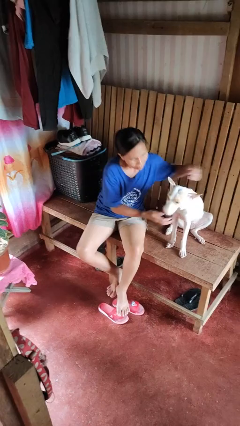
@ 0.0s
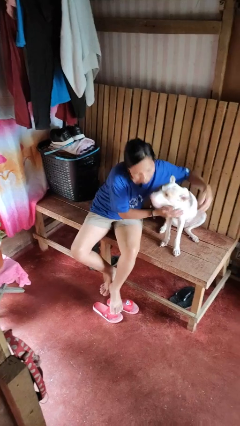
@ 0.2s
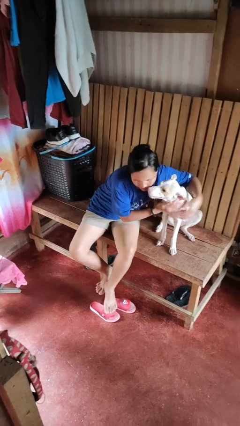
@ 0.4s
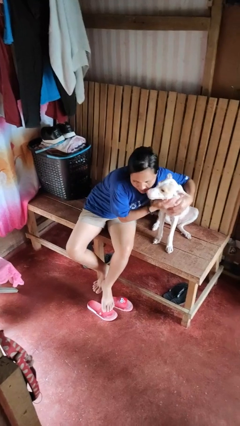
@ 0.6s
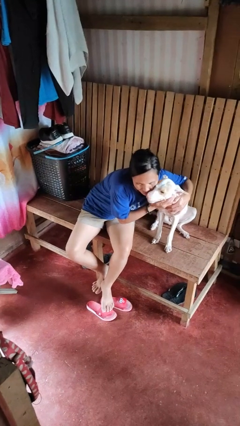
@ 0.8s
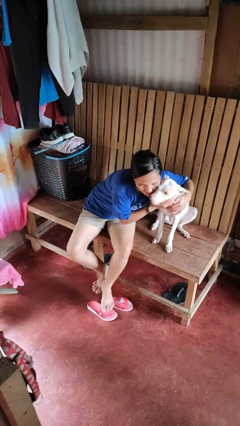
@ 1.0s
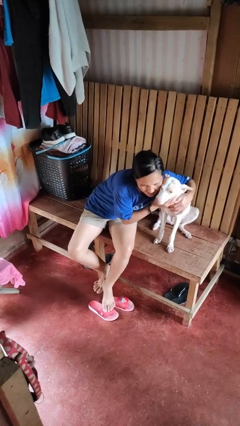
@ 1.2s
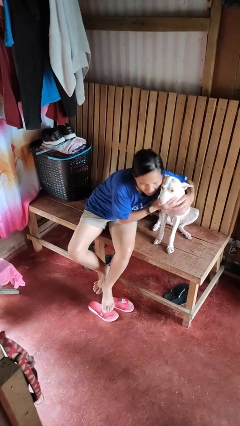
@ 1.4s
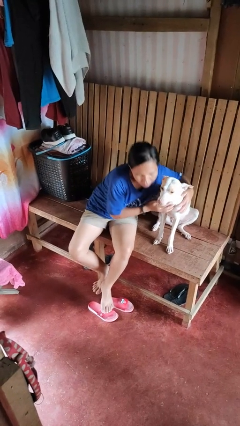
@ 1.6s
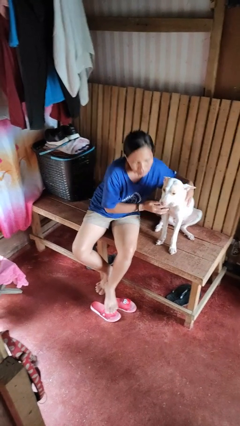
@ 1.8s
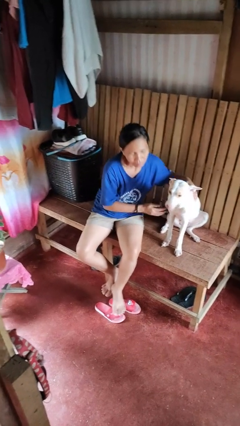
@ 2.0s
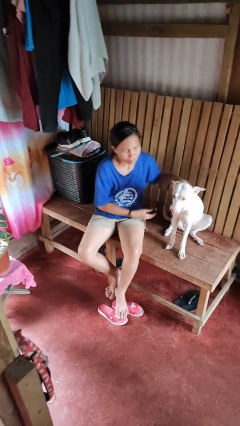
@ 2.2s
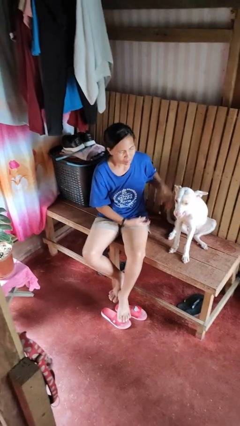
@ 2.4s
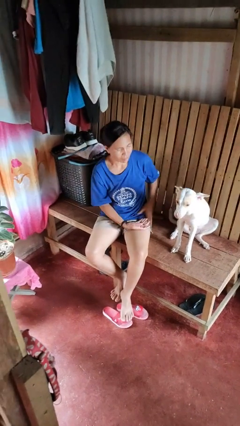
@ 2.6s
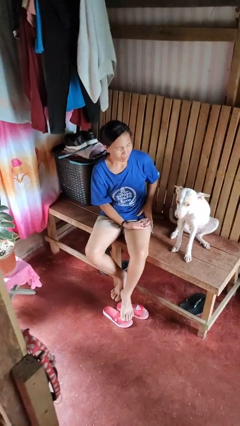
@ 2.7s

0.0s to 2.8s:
person hugs dog

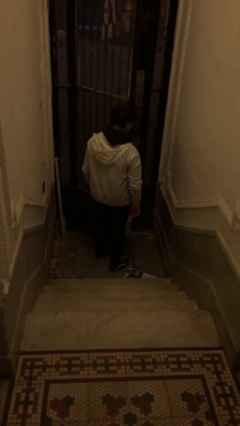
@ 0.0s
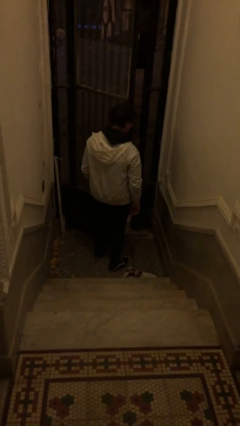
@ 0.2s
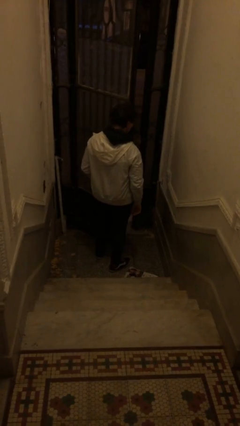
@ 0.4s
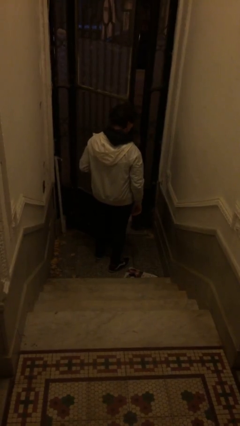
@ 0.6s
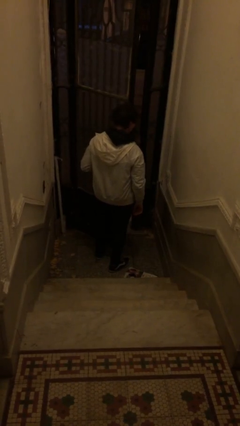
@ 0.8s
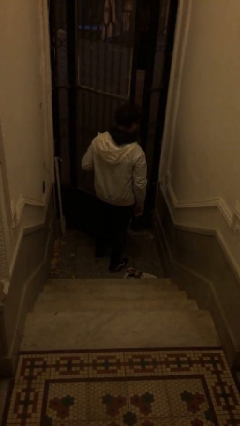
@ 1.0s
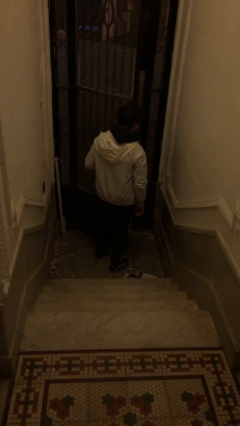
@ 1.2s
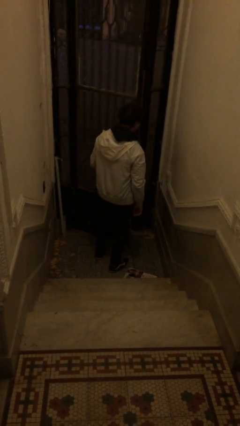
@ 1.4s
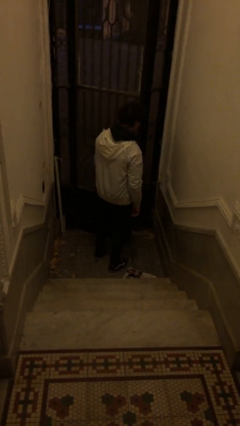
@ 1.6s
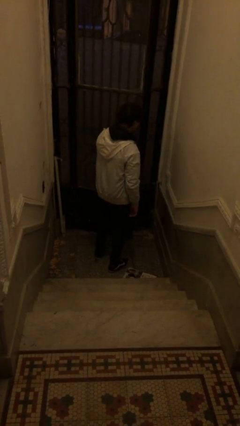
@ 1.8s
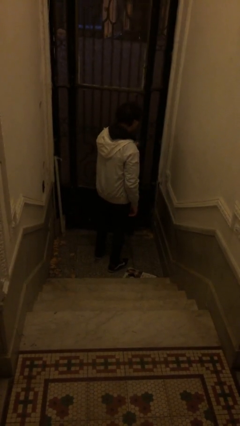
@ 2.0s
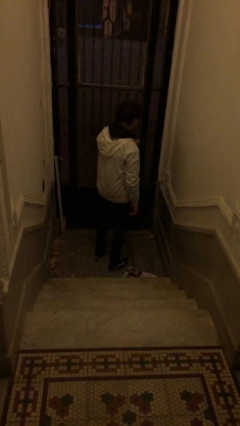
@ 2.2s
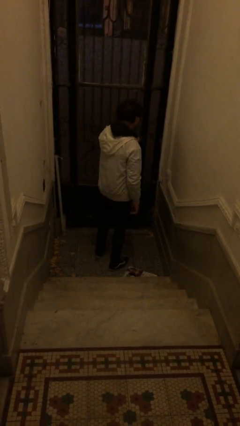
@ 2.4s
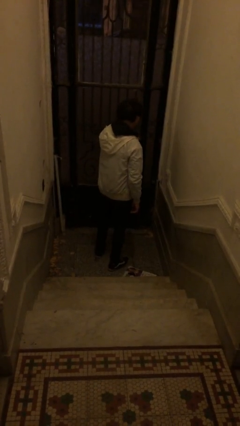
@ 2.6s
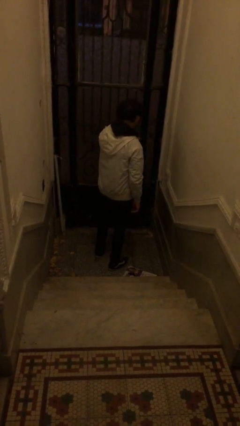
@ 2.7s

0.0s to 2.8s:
person closes facility door

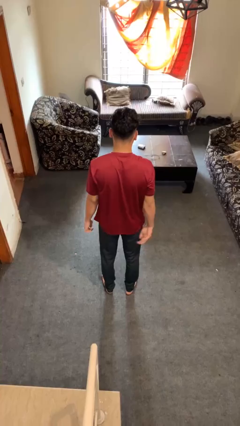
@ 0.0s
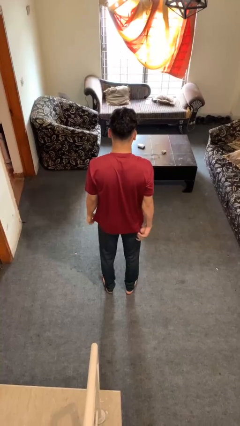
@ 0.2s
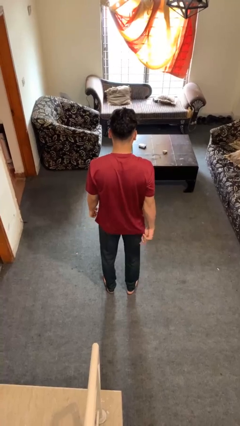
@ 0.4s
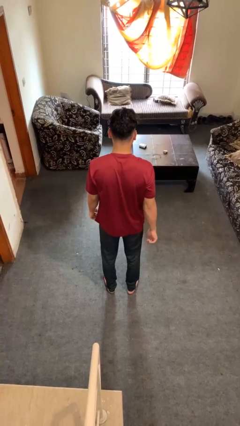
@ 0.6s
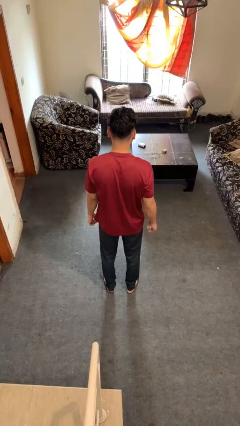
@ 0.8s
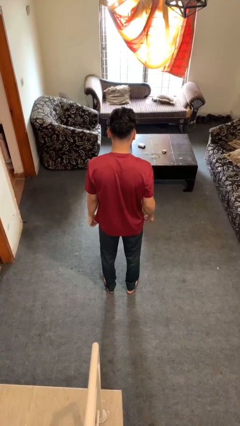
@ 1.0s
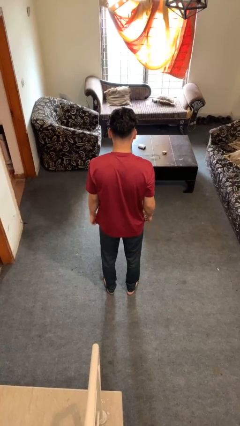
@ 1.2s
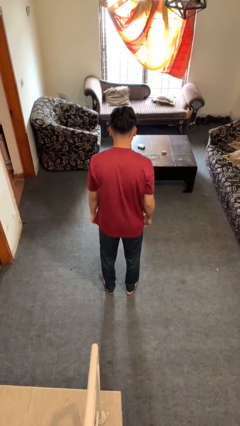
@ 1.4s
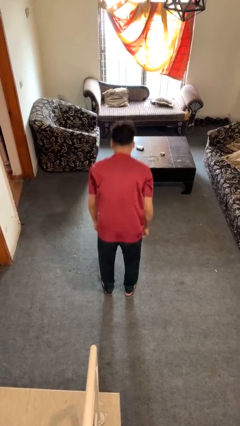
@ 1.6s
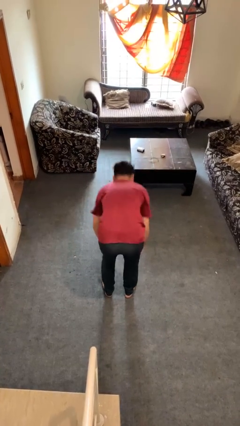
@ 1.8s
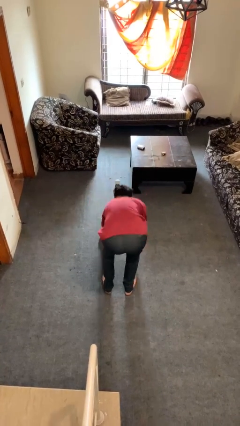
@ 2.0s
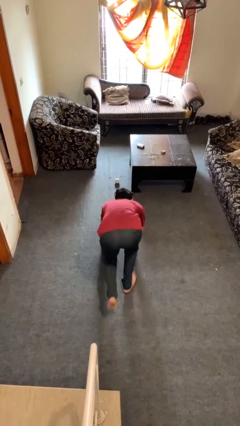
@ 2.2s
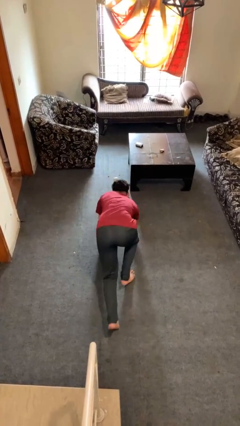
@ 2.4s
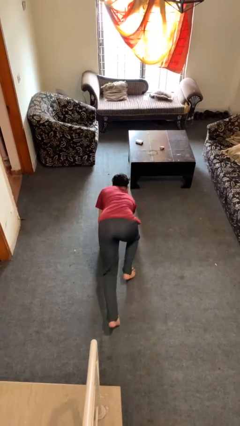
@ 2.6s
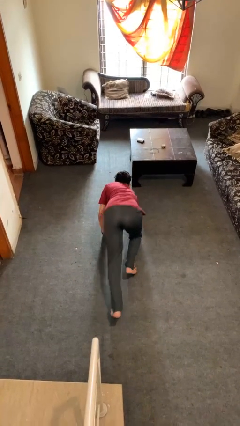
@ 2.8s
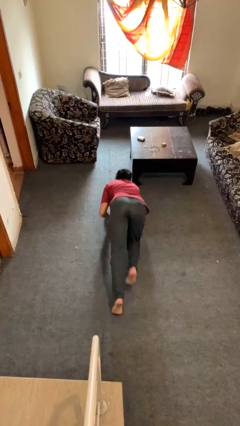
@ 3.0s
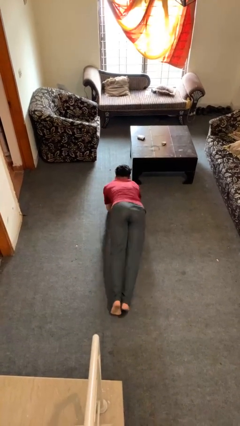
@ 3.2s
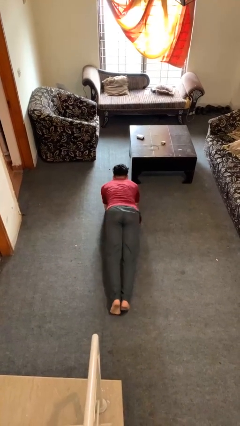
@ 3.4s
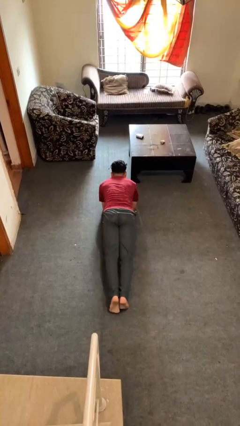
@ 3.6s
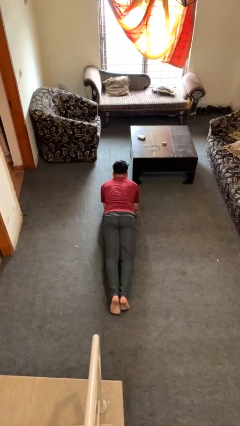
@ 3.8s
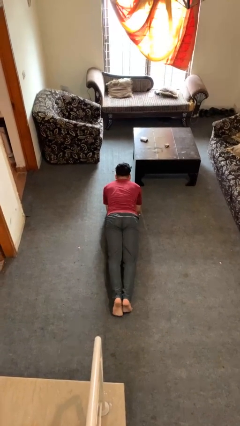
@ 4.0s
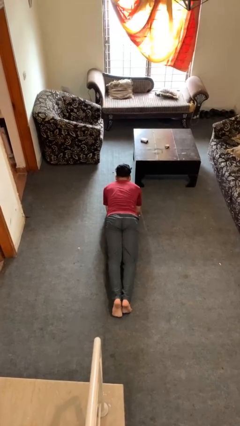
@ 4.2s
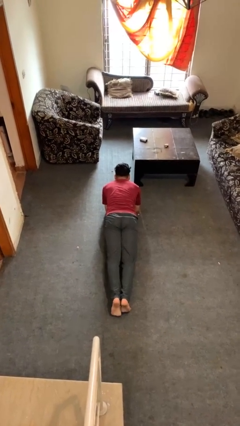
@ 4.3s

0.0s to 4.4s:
person exercises with plank

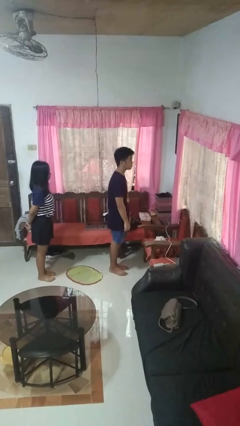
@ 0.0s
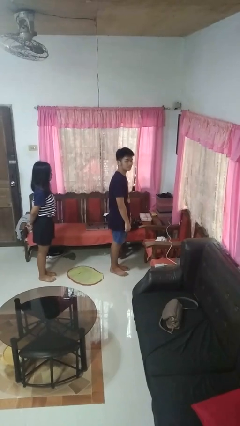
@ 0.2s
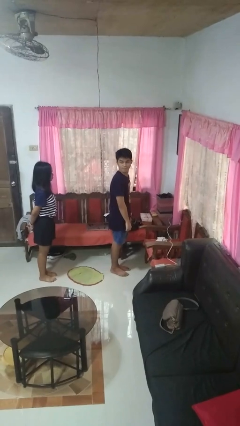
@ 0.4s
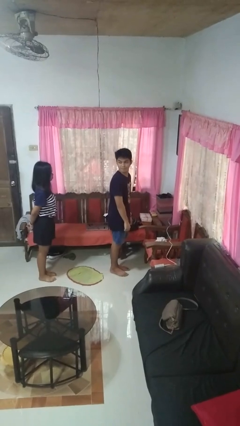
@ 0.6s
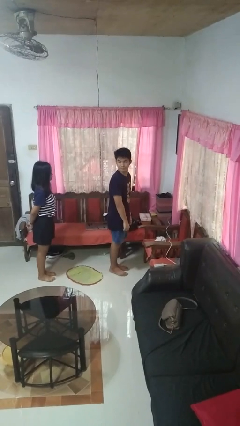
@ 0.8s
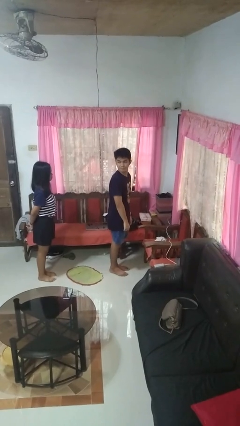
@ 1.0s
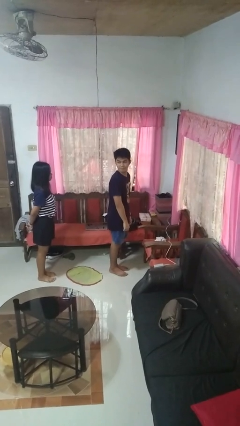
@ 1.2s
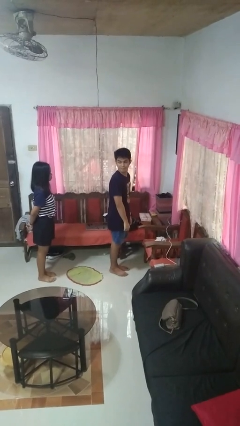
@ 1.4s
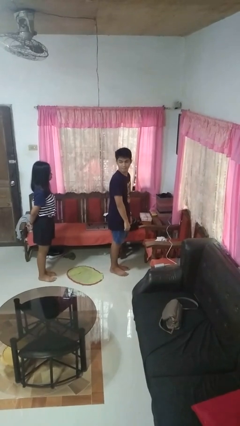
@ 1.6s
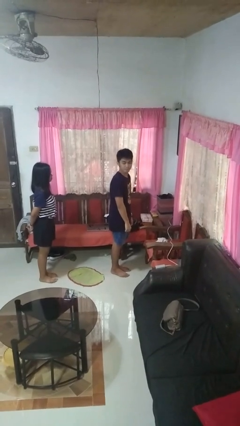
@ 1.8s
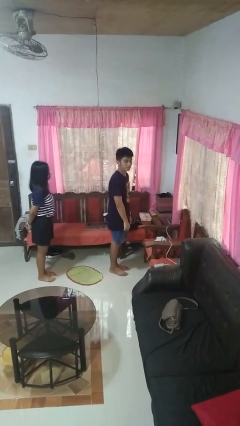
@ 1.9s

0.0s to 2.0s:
person looks over shoulder

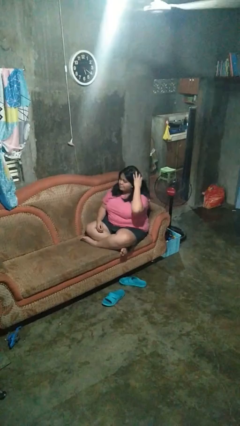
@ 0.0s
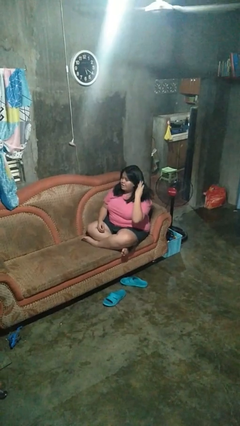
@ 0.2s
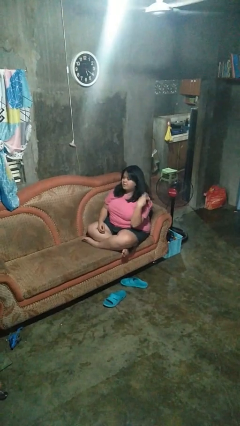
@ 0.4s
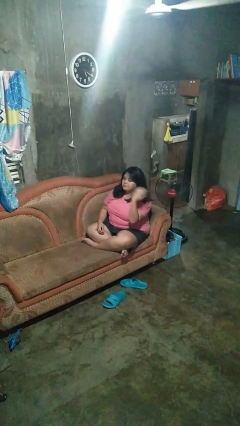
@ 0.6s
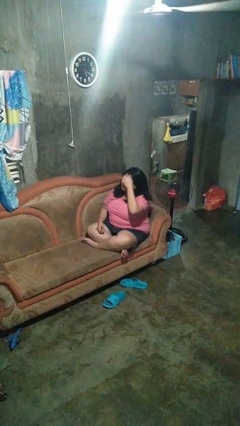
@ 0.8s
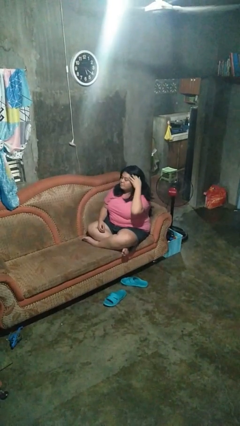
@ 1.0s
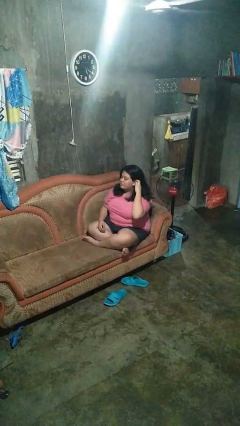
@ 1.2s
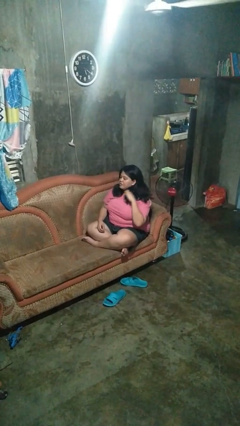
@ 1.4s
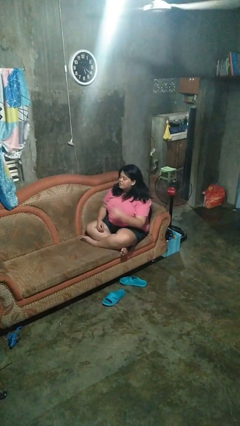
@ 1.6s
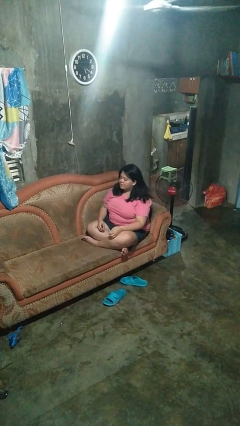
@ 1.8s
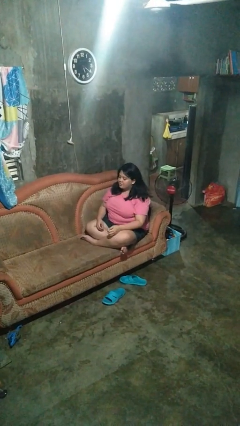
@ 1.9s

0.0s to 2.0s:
person strokes hair

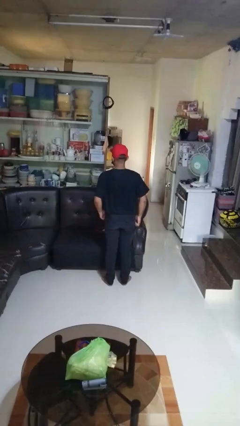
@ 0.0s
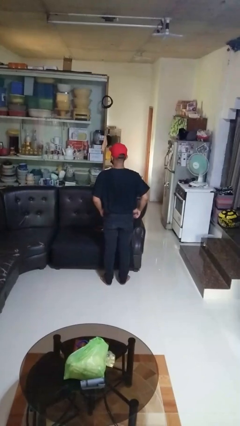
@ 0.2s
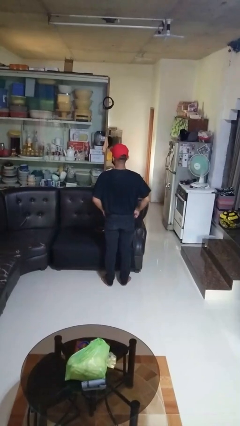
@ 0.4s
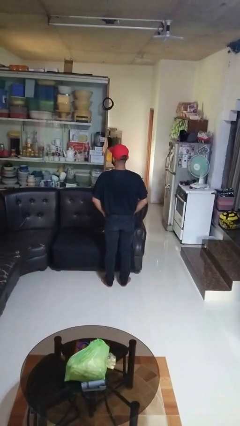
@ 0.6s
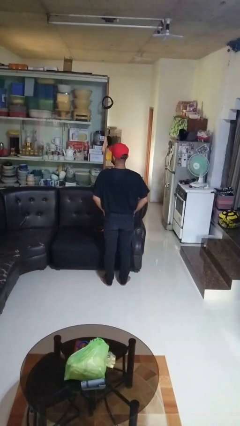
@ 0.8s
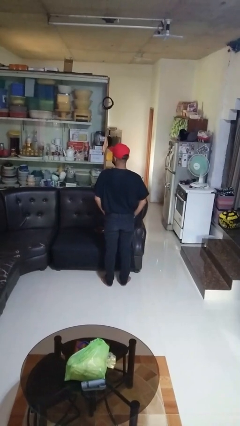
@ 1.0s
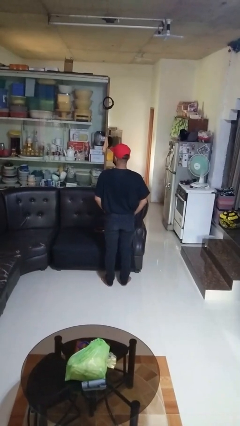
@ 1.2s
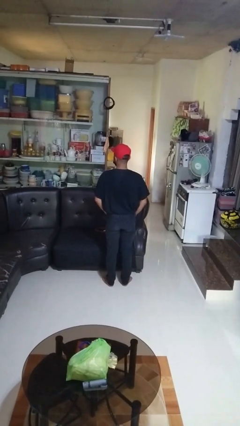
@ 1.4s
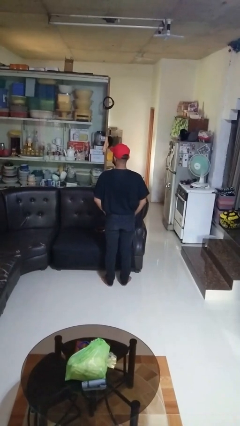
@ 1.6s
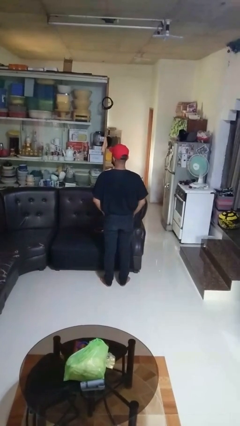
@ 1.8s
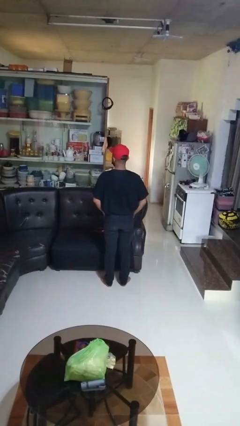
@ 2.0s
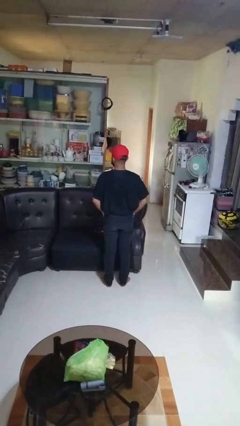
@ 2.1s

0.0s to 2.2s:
person puts hands in back pockets

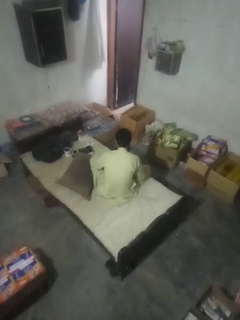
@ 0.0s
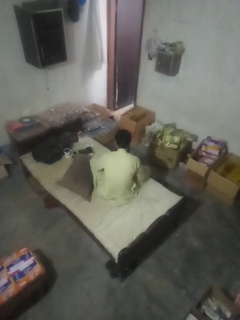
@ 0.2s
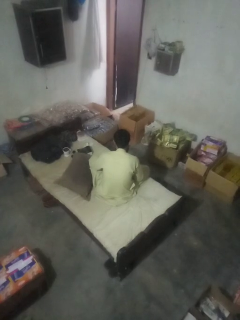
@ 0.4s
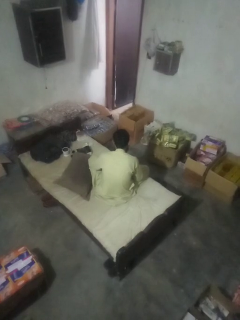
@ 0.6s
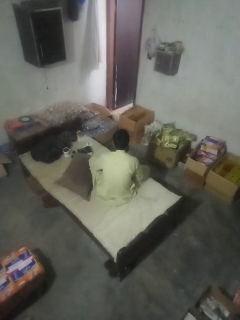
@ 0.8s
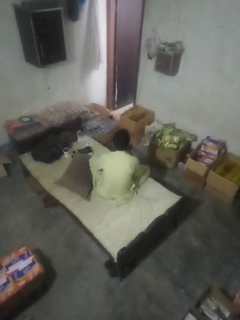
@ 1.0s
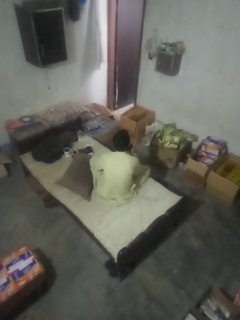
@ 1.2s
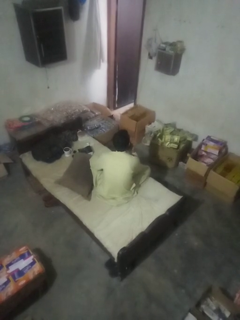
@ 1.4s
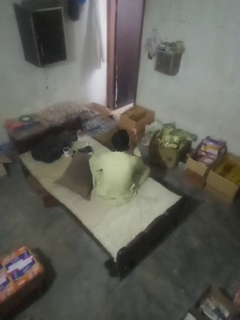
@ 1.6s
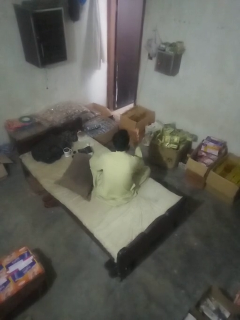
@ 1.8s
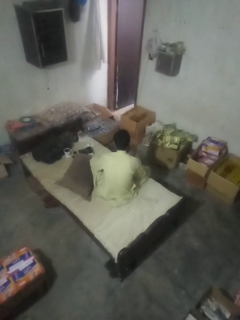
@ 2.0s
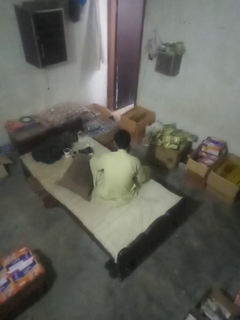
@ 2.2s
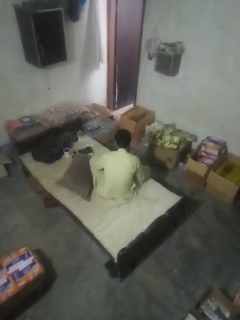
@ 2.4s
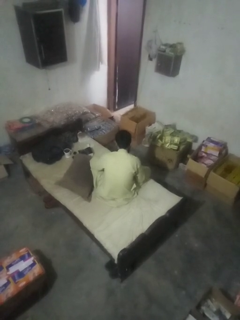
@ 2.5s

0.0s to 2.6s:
person gestures blow kiss
